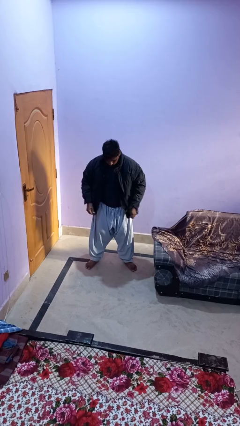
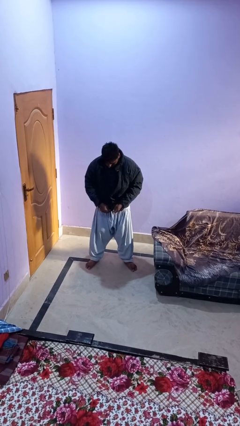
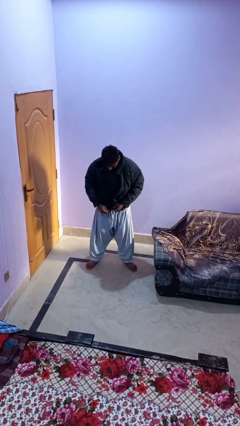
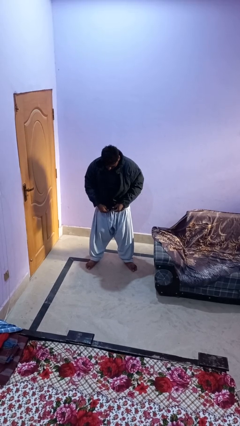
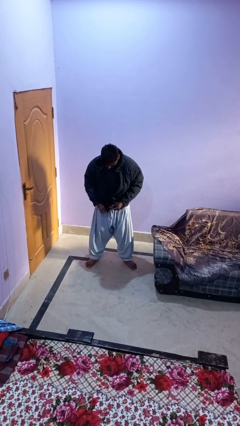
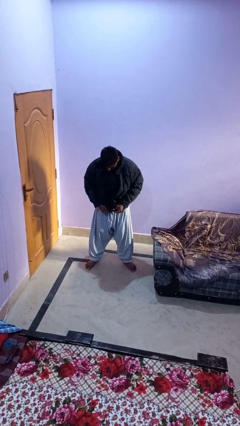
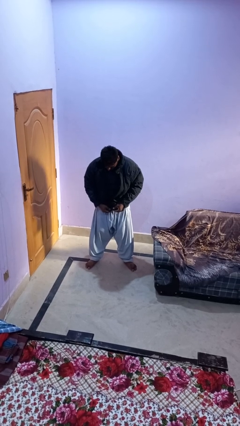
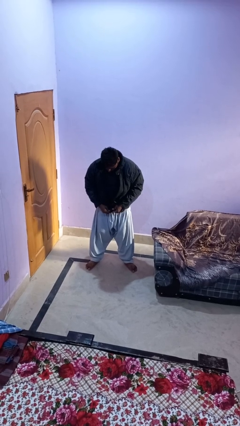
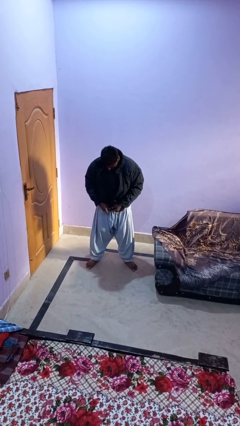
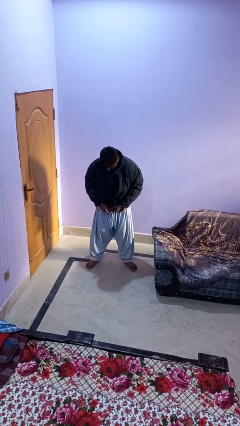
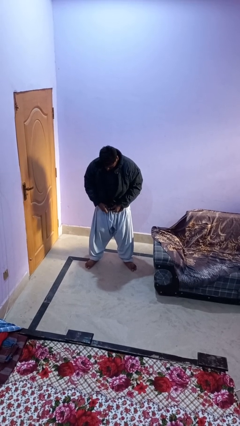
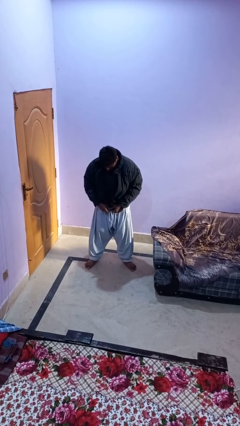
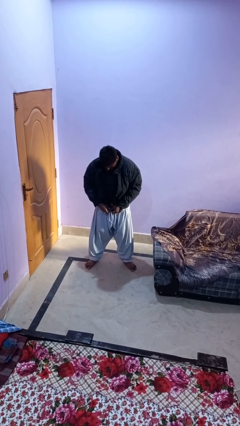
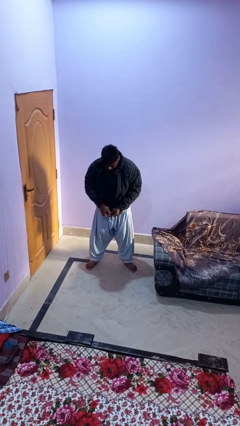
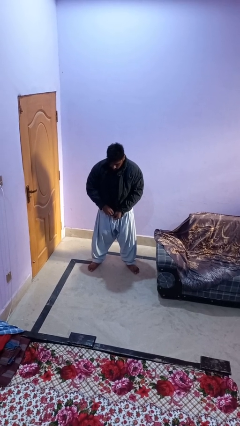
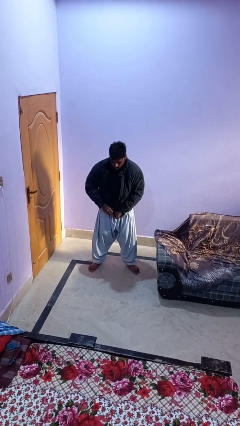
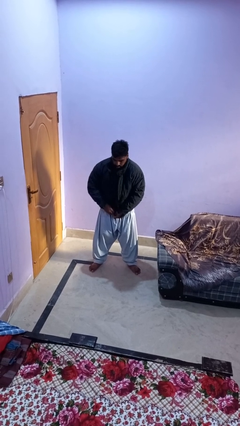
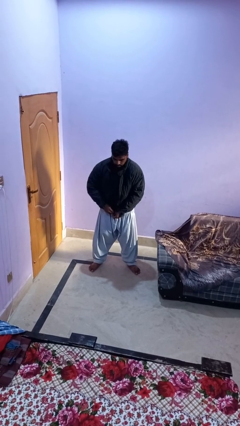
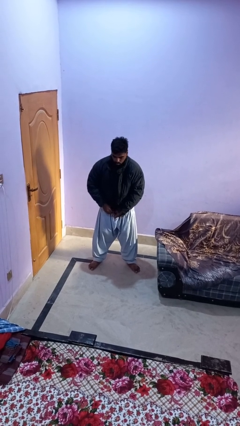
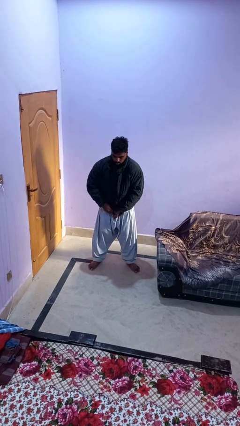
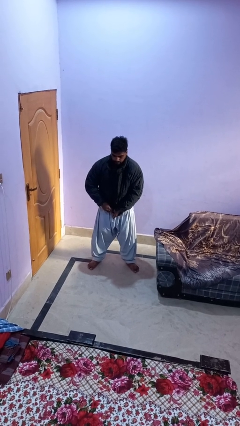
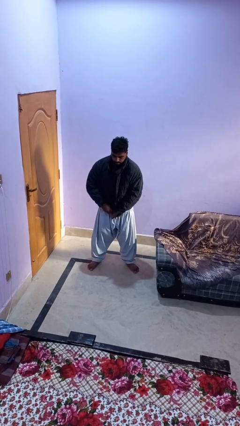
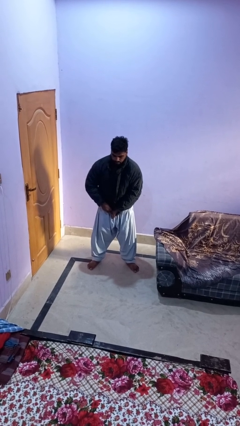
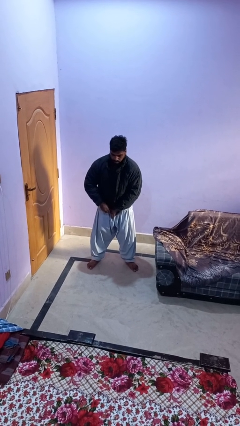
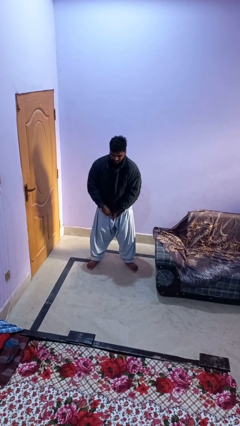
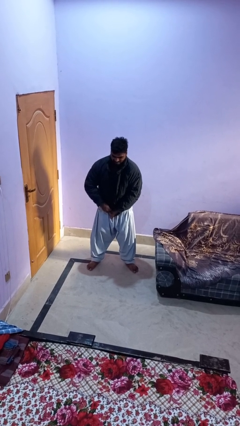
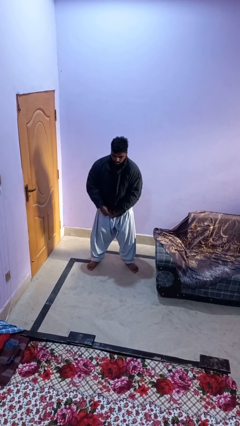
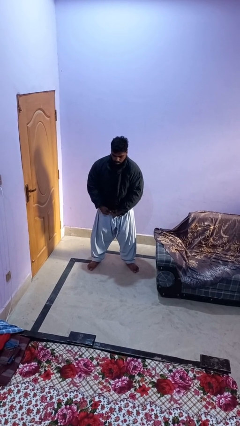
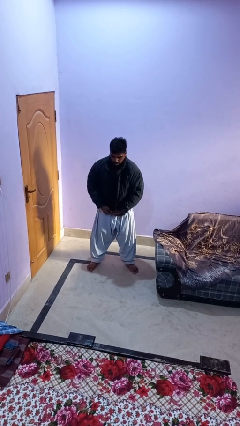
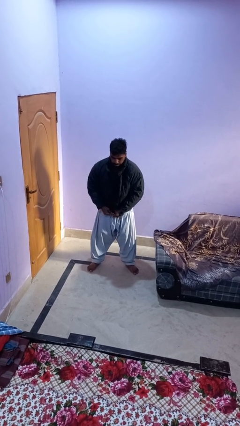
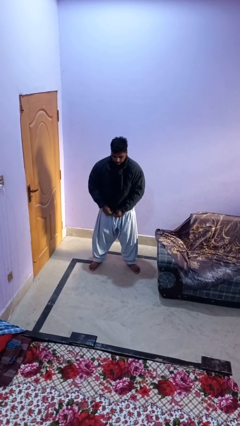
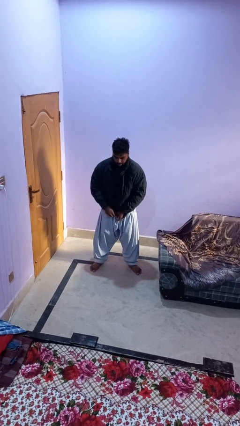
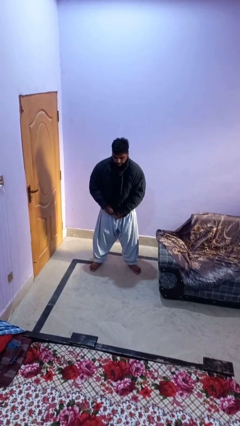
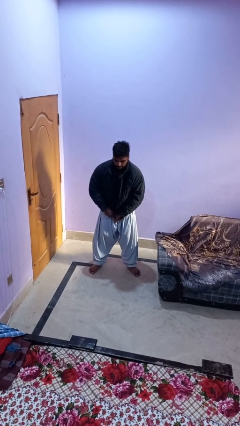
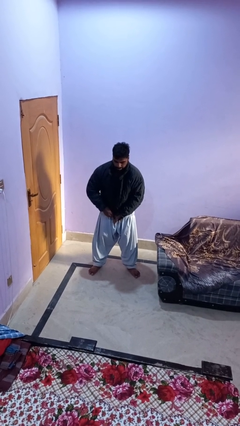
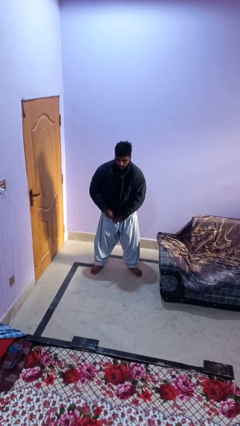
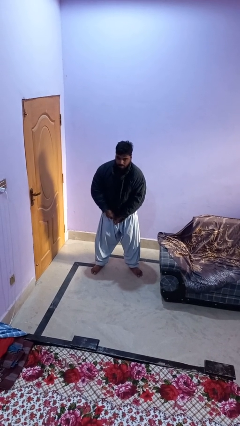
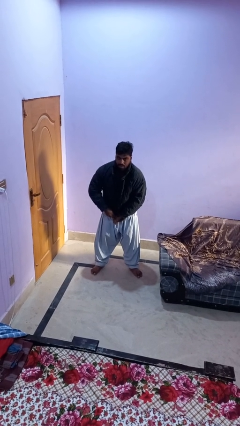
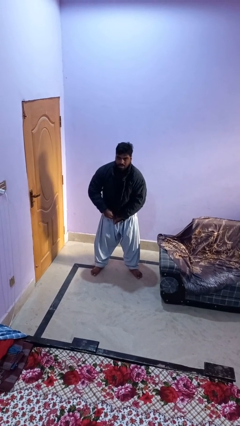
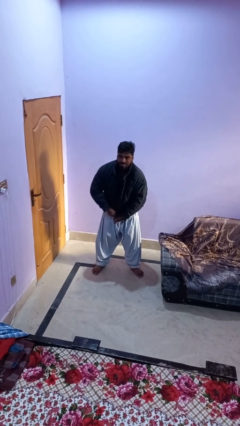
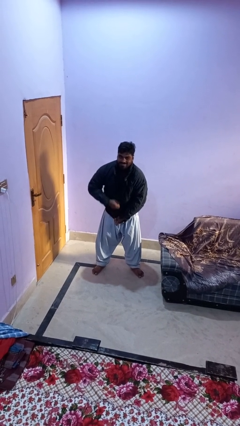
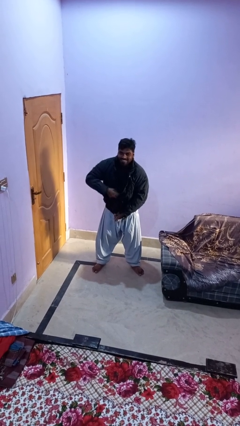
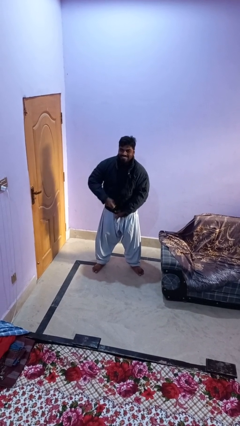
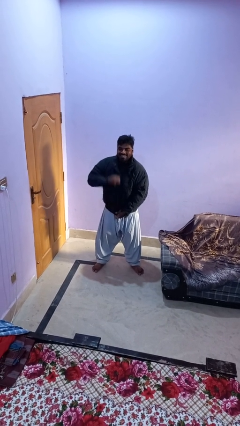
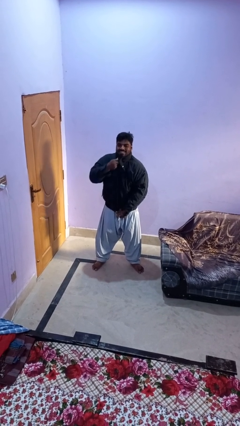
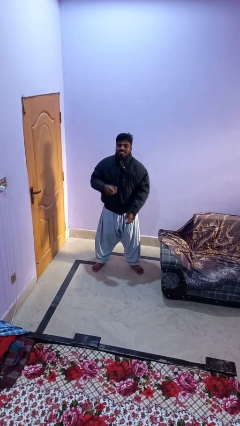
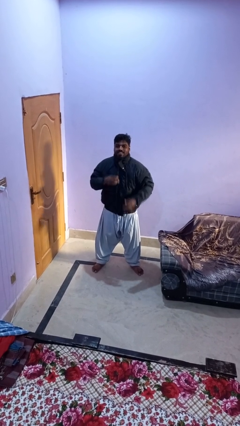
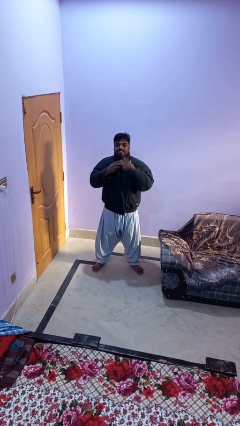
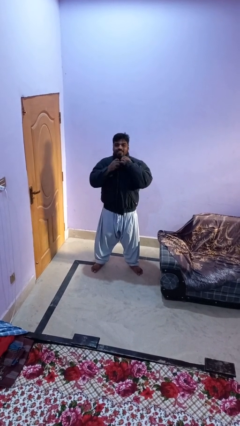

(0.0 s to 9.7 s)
person zips up jacket

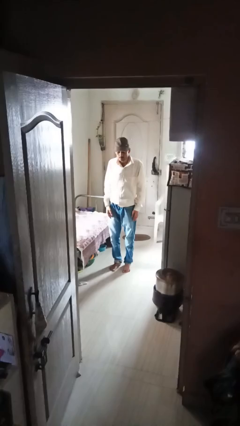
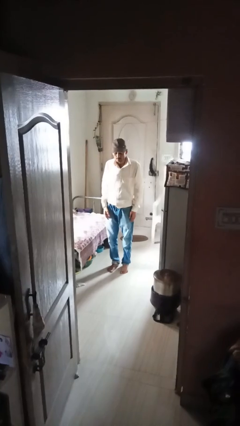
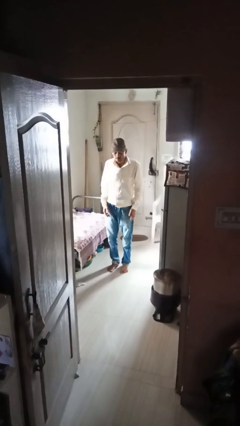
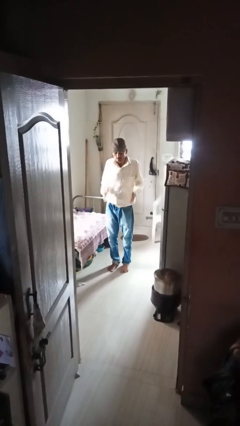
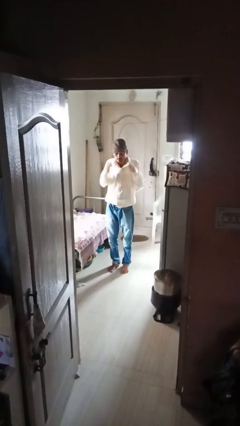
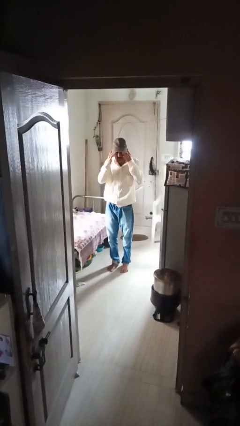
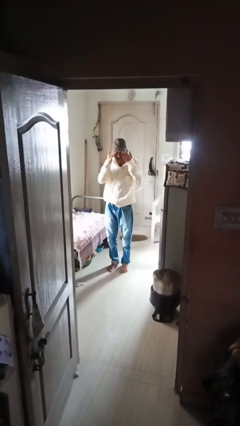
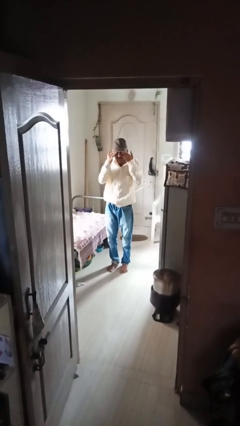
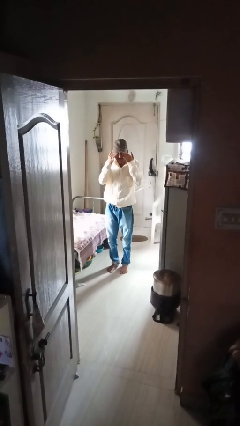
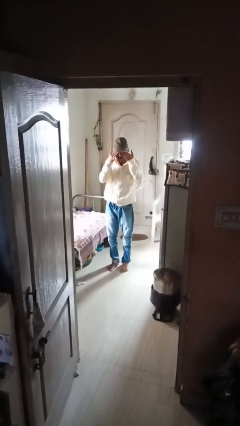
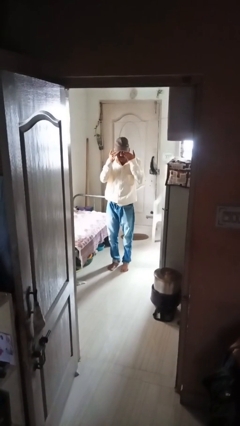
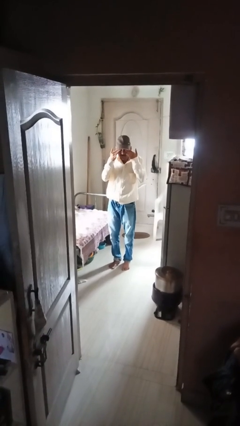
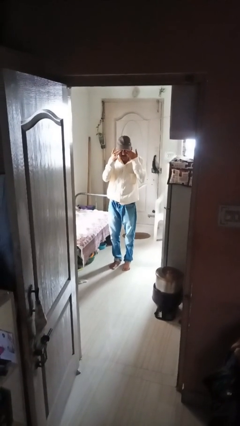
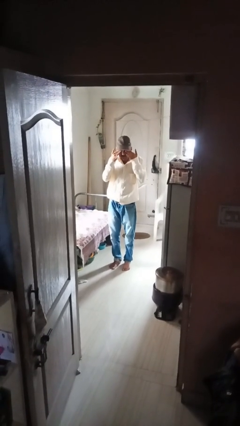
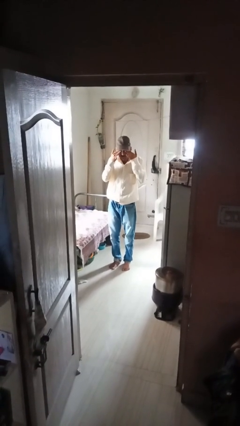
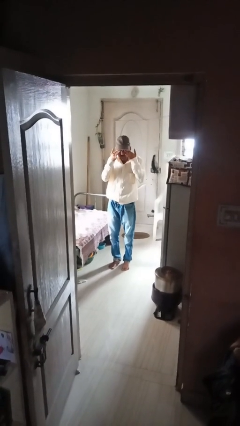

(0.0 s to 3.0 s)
person rubs eyes

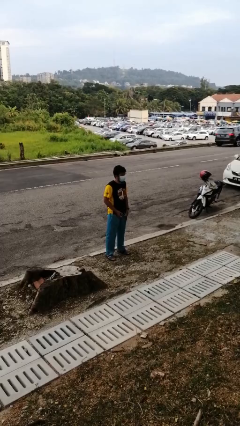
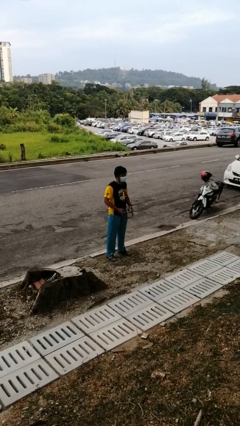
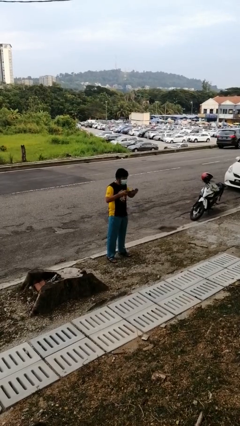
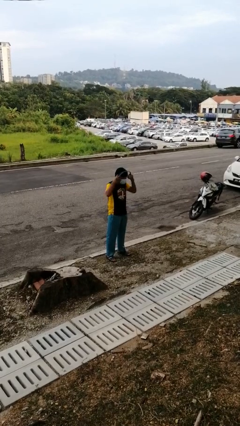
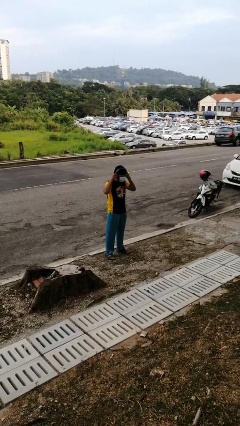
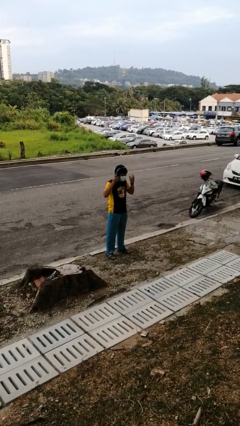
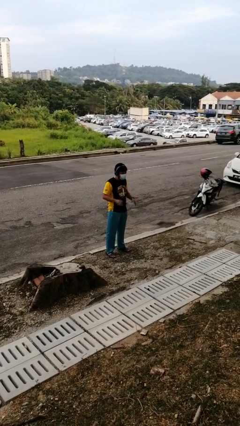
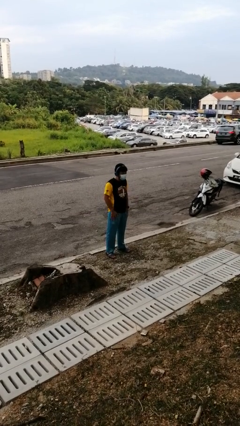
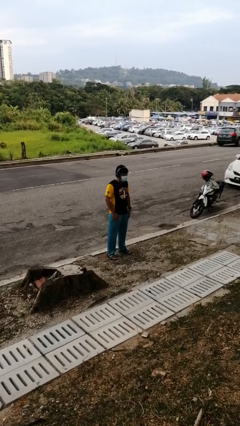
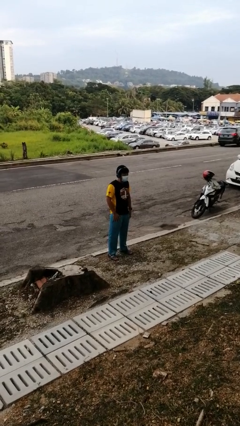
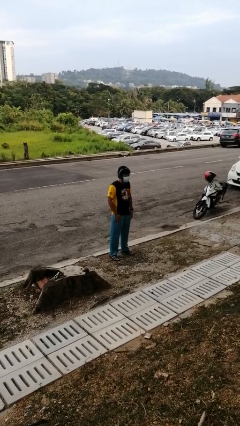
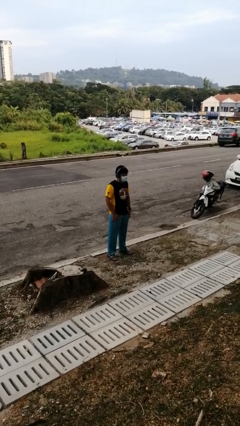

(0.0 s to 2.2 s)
person puts on headphones

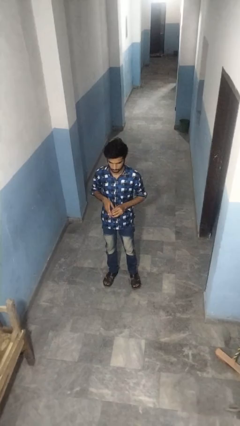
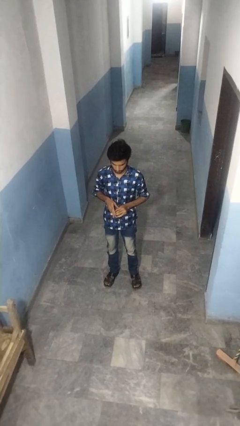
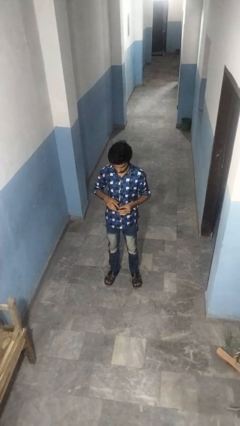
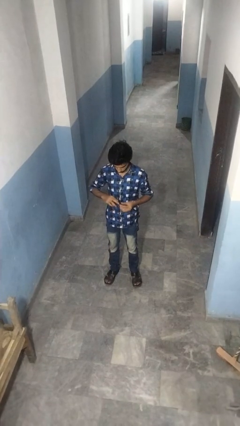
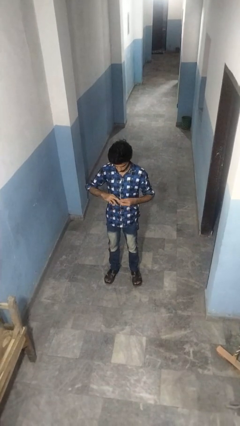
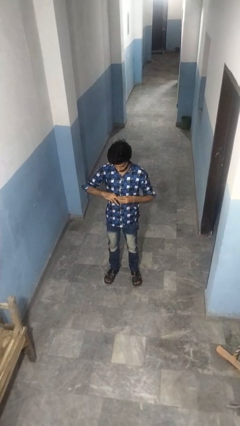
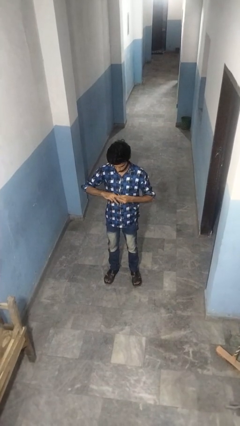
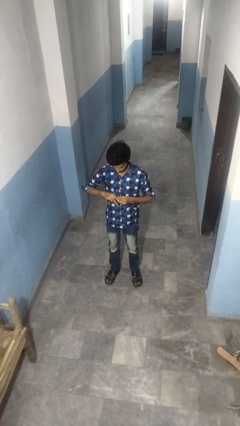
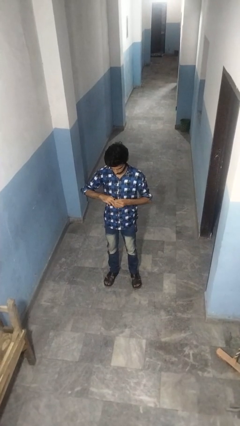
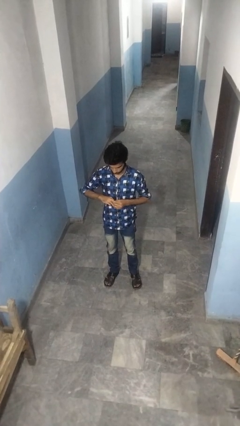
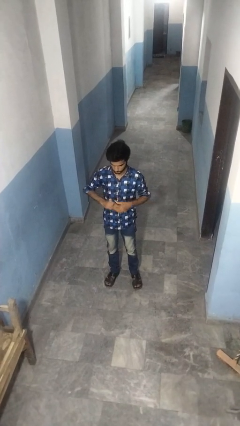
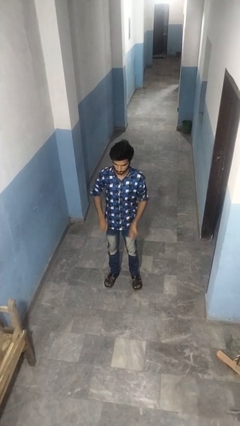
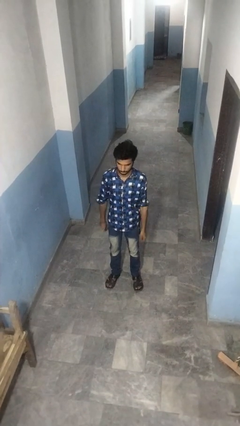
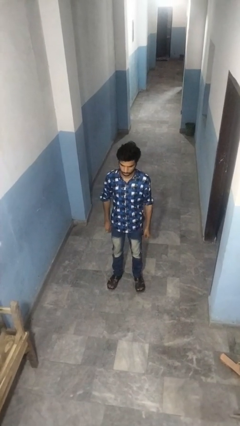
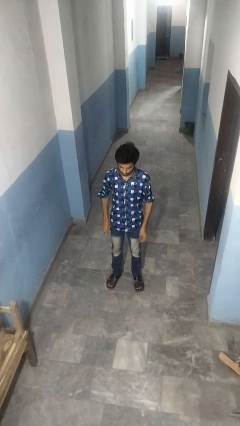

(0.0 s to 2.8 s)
person puts on ring

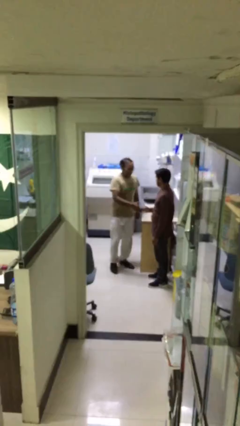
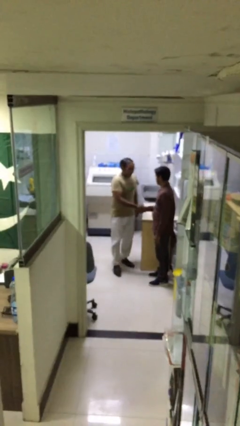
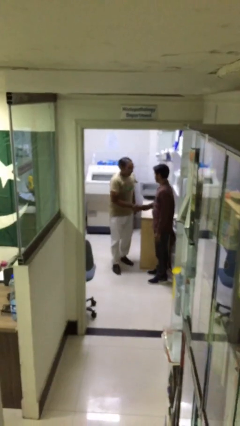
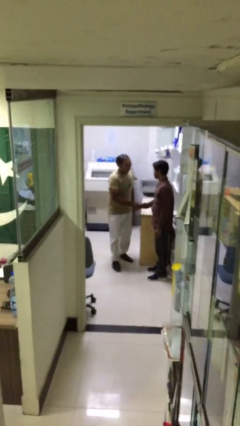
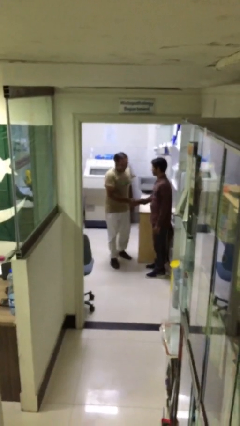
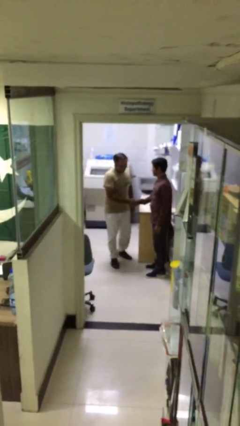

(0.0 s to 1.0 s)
person shakes hand
